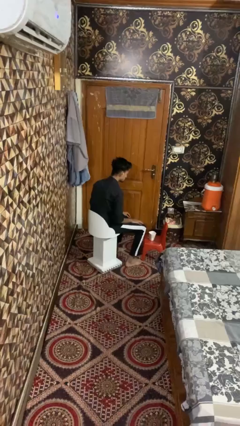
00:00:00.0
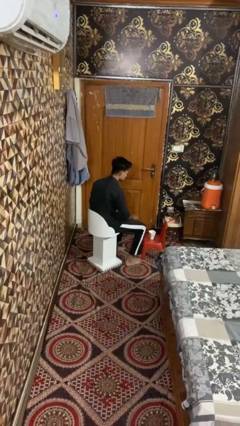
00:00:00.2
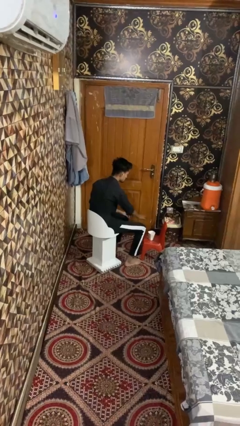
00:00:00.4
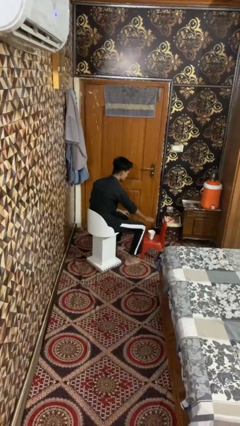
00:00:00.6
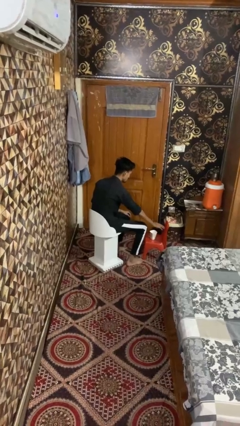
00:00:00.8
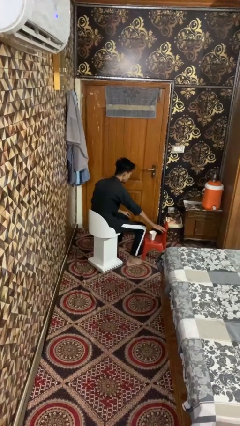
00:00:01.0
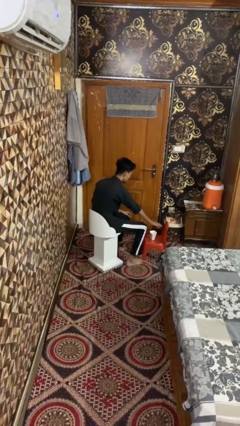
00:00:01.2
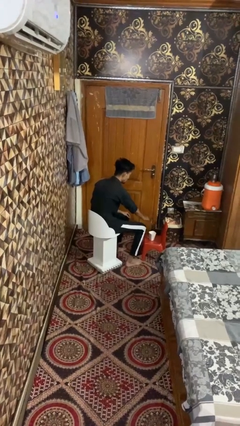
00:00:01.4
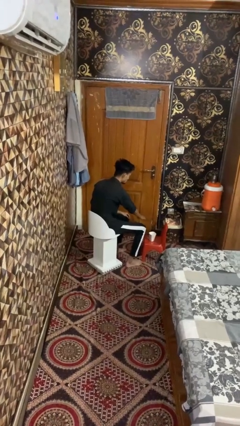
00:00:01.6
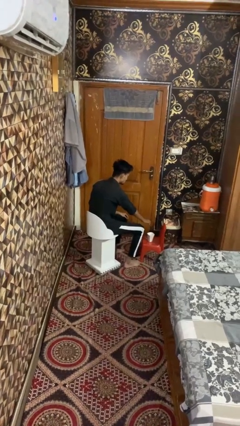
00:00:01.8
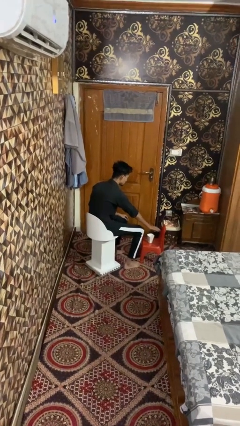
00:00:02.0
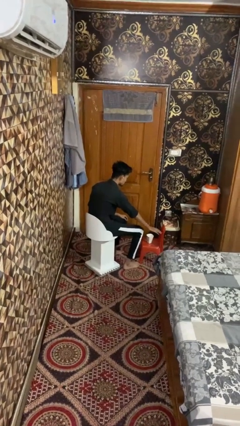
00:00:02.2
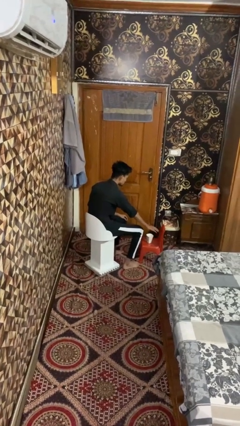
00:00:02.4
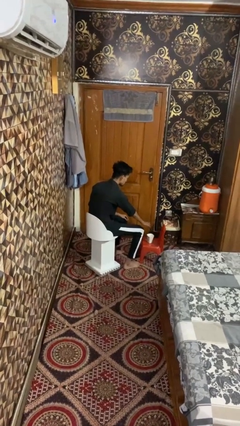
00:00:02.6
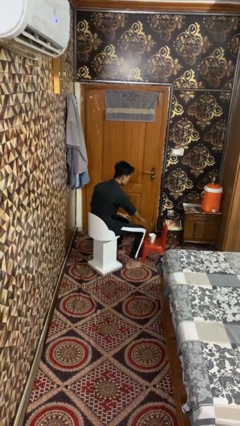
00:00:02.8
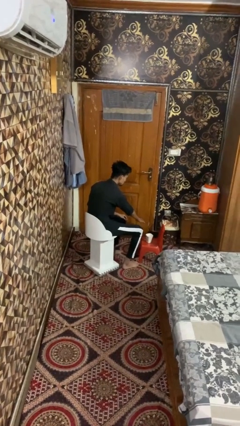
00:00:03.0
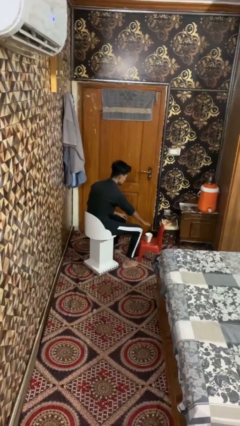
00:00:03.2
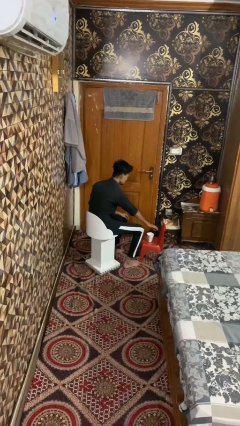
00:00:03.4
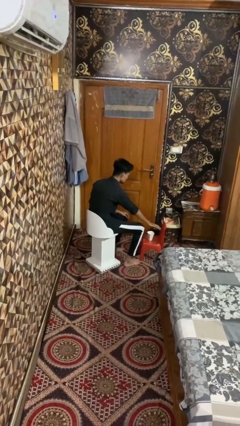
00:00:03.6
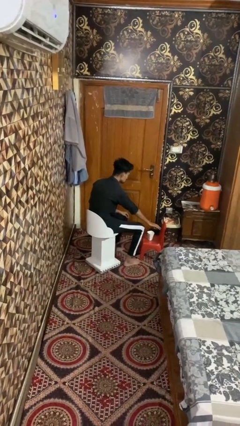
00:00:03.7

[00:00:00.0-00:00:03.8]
person waves hand over object

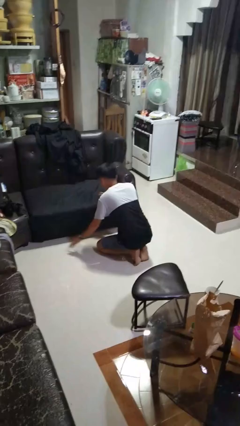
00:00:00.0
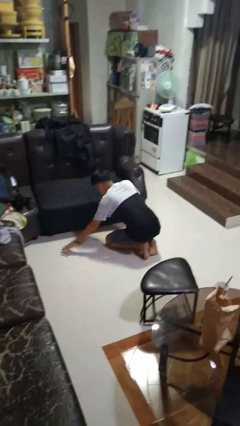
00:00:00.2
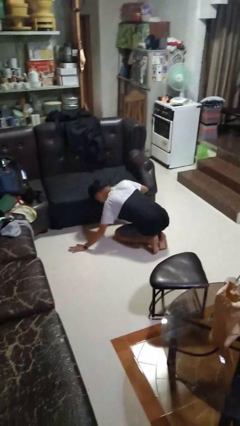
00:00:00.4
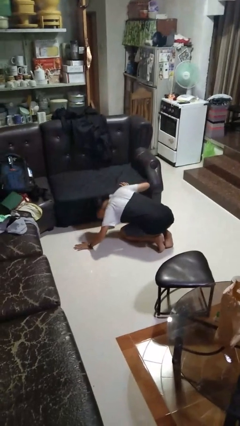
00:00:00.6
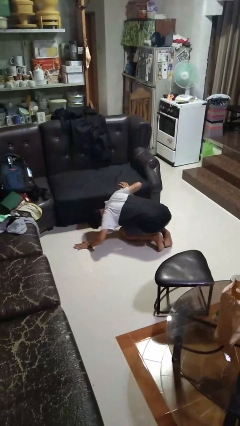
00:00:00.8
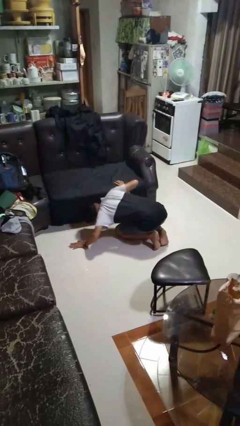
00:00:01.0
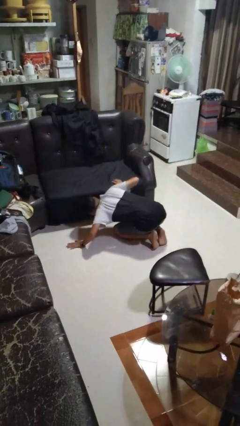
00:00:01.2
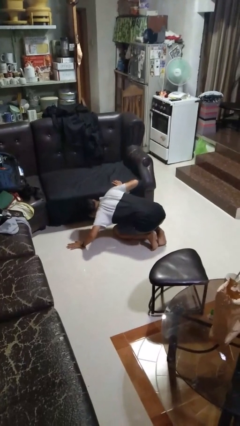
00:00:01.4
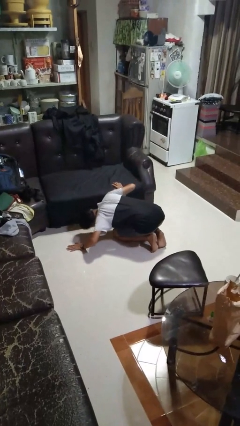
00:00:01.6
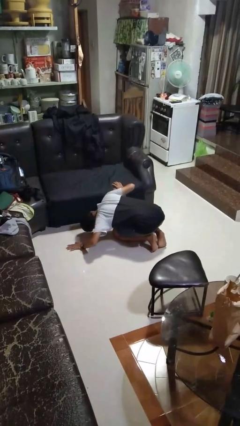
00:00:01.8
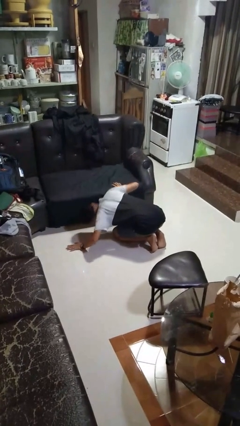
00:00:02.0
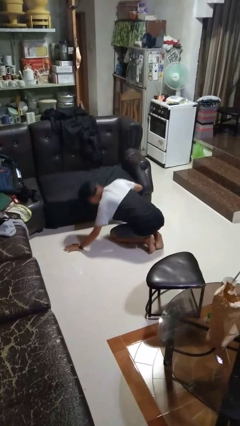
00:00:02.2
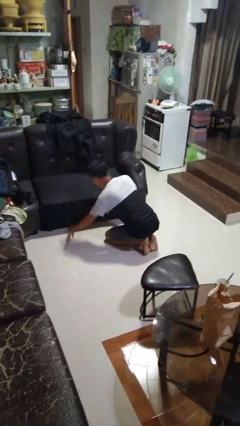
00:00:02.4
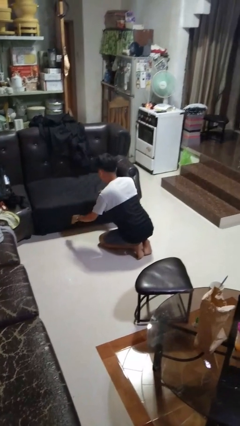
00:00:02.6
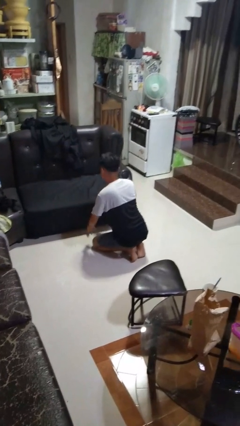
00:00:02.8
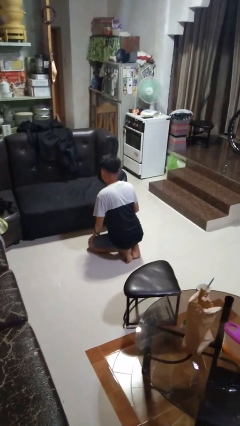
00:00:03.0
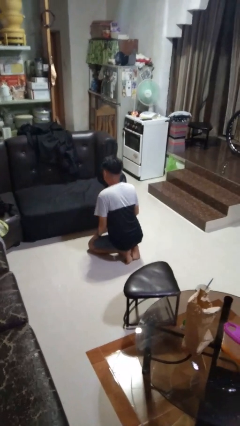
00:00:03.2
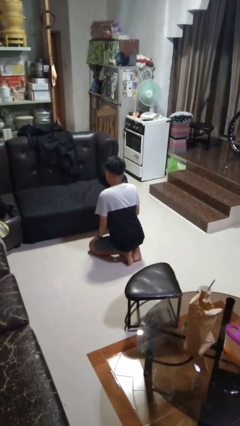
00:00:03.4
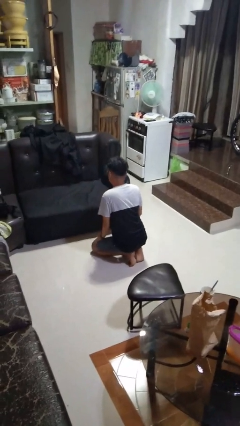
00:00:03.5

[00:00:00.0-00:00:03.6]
person searches under couch

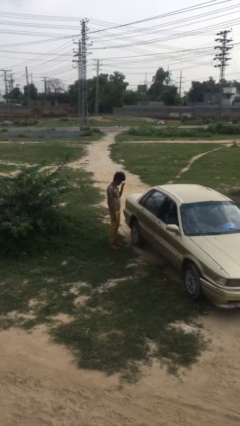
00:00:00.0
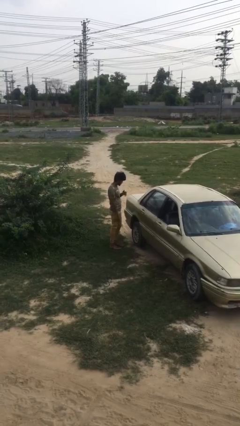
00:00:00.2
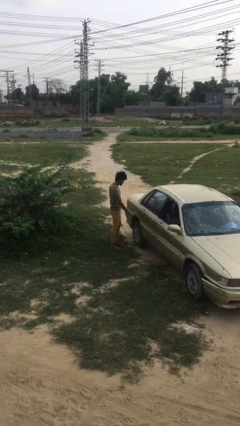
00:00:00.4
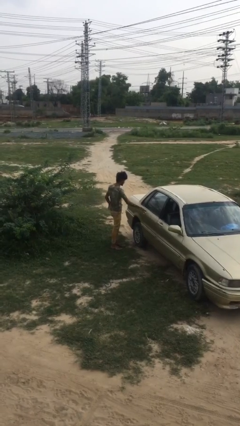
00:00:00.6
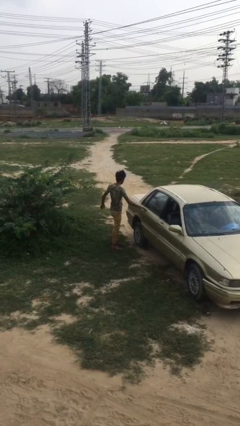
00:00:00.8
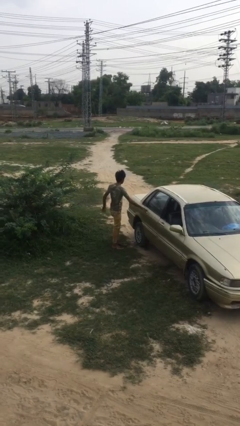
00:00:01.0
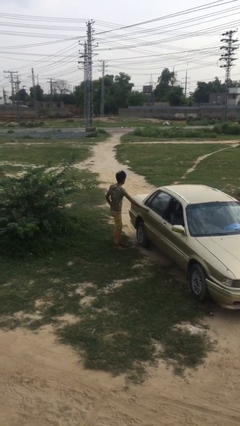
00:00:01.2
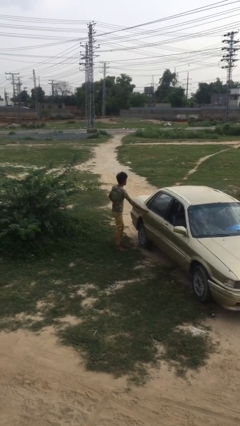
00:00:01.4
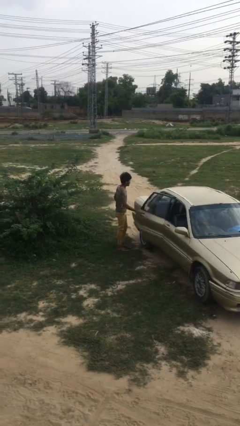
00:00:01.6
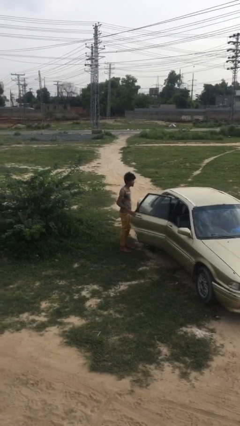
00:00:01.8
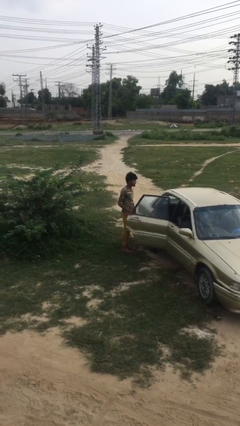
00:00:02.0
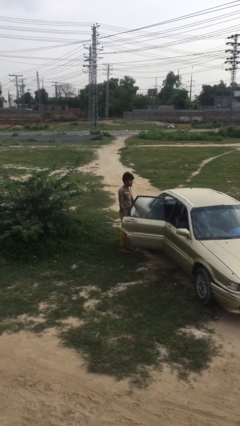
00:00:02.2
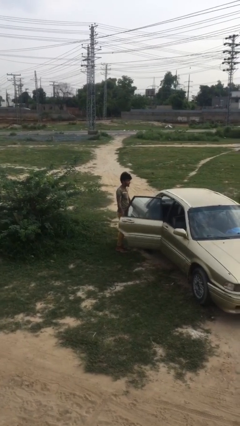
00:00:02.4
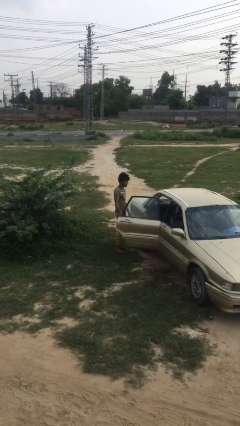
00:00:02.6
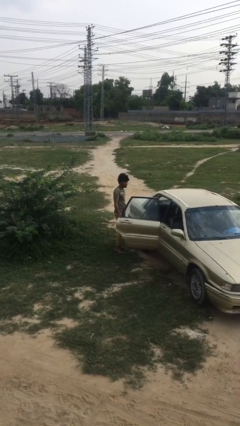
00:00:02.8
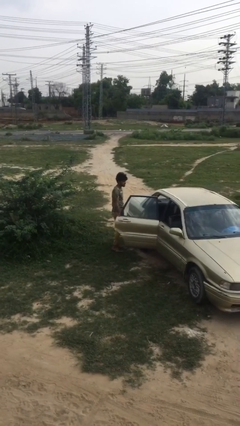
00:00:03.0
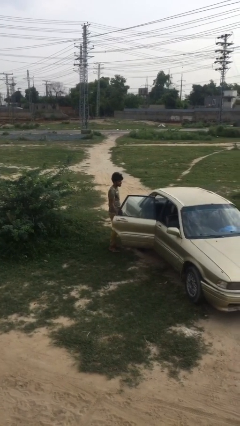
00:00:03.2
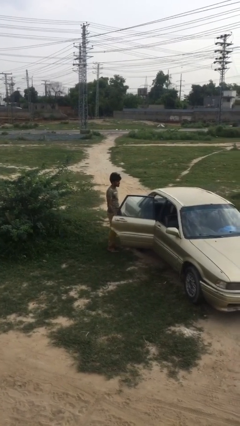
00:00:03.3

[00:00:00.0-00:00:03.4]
person opens car door

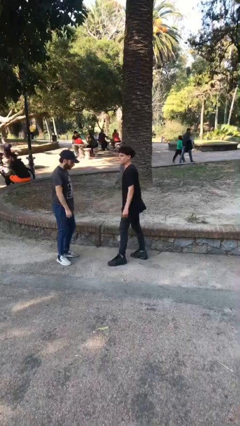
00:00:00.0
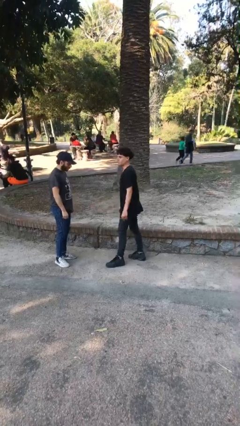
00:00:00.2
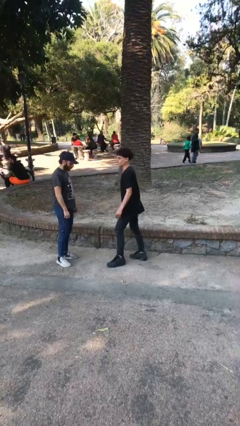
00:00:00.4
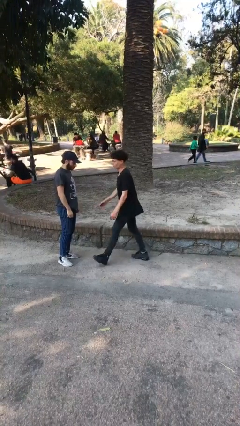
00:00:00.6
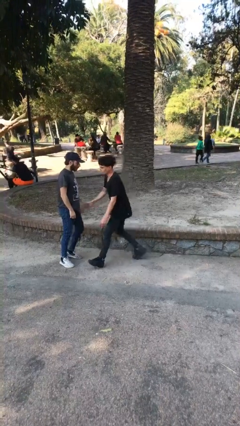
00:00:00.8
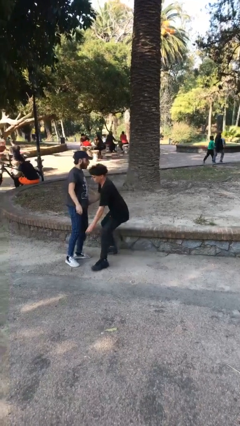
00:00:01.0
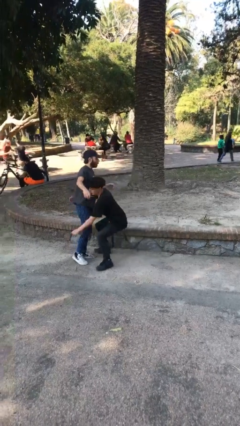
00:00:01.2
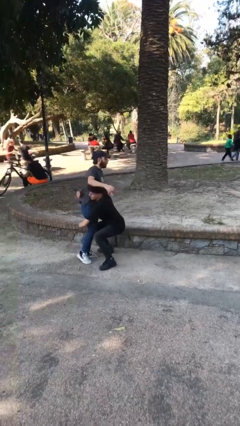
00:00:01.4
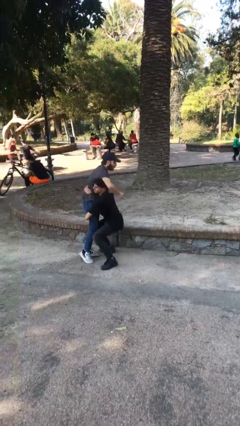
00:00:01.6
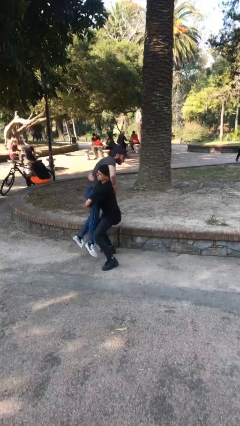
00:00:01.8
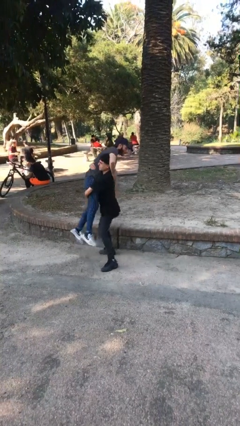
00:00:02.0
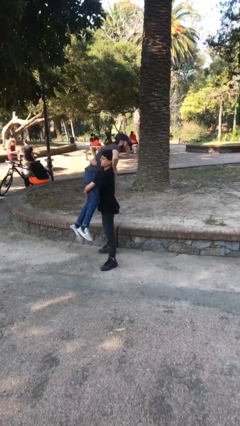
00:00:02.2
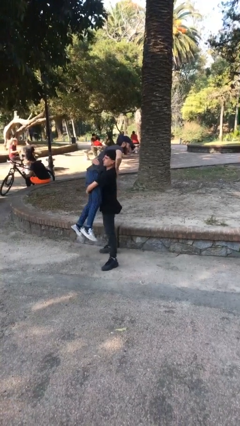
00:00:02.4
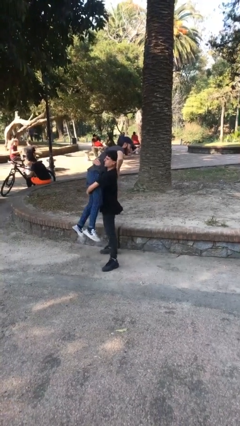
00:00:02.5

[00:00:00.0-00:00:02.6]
person picks up person

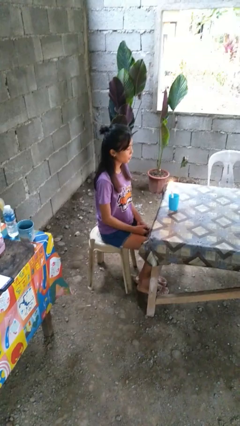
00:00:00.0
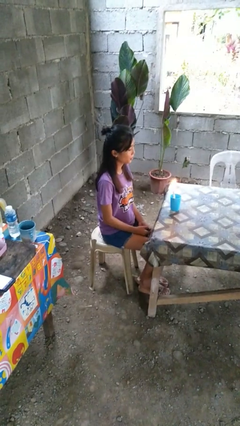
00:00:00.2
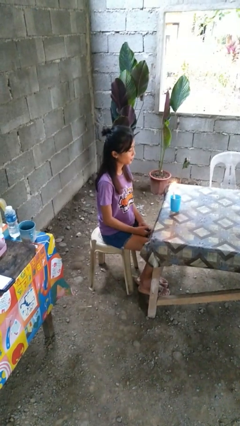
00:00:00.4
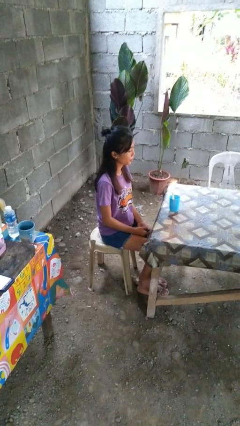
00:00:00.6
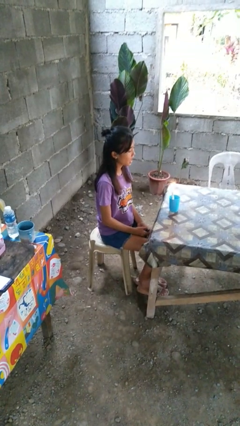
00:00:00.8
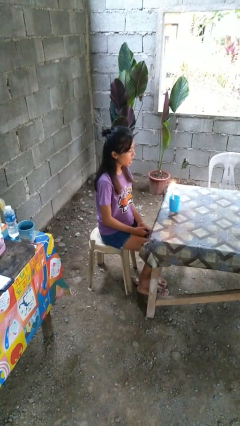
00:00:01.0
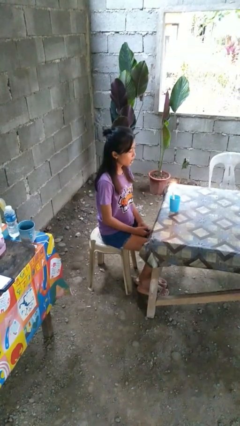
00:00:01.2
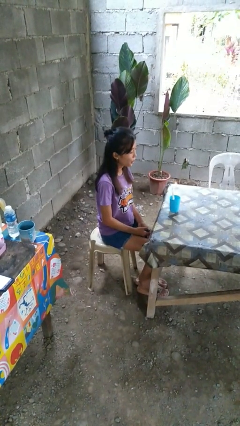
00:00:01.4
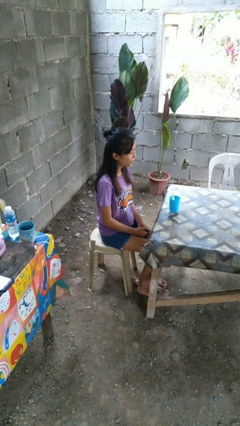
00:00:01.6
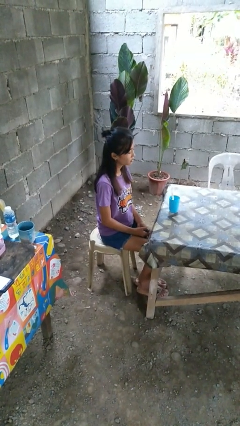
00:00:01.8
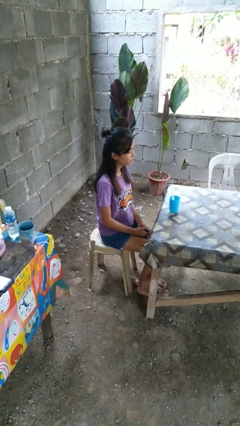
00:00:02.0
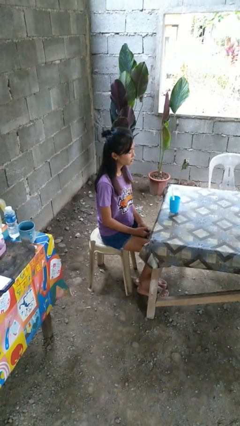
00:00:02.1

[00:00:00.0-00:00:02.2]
person extinguishes candle

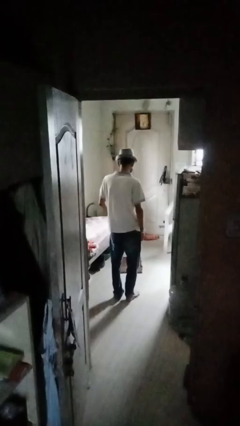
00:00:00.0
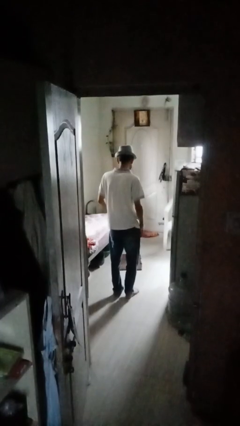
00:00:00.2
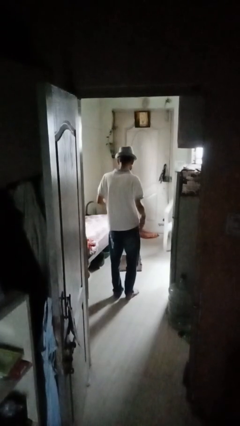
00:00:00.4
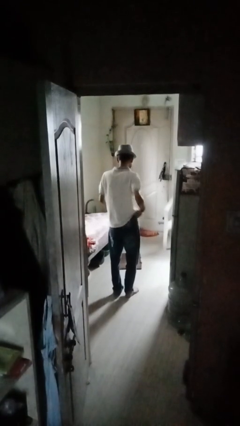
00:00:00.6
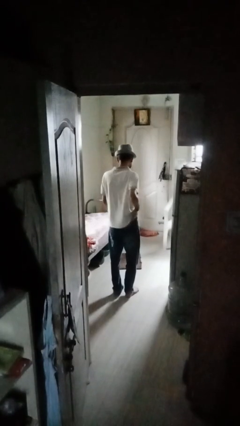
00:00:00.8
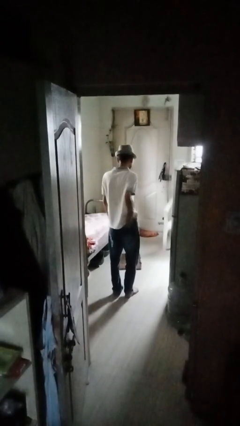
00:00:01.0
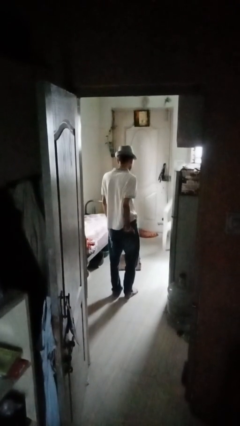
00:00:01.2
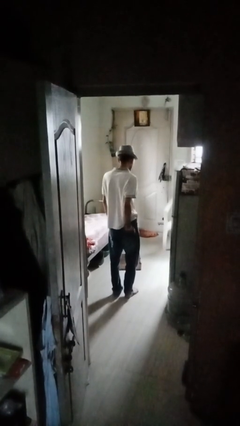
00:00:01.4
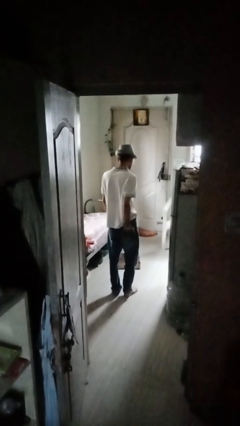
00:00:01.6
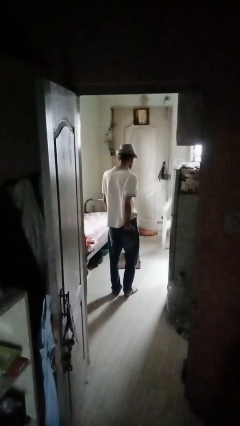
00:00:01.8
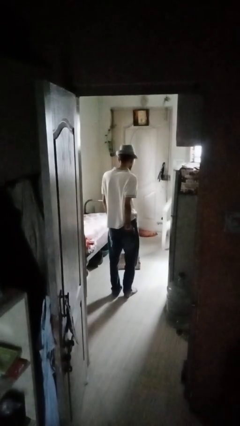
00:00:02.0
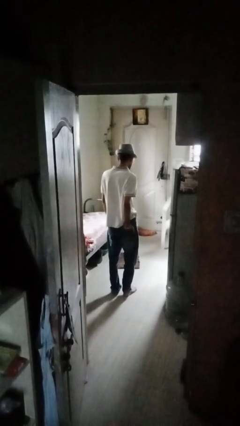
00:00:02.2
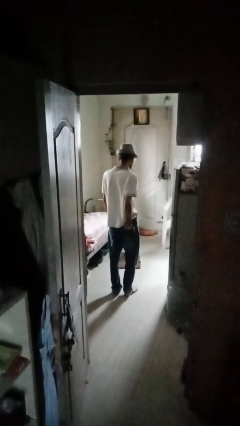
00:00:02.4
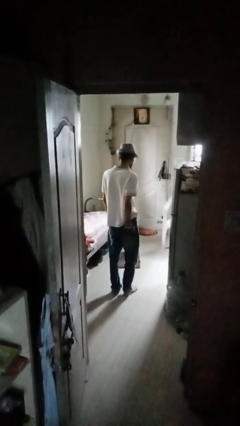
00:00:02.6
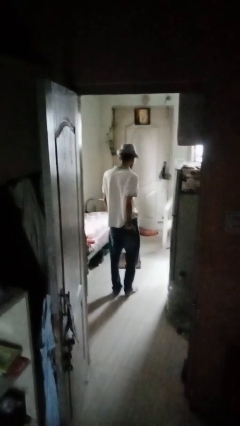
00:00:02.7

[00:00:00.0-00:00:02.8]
person puts hands in back pockets
